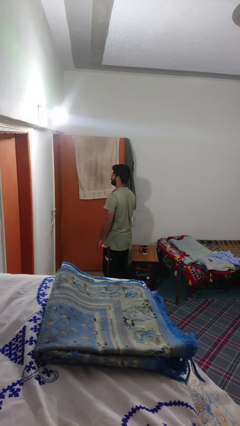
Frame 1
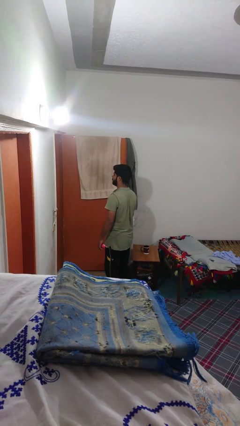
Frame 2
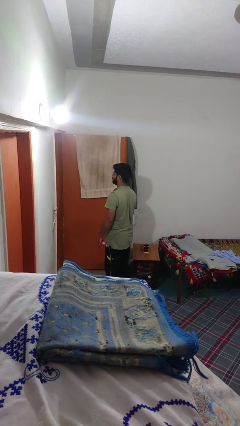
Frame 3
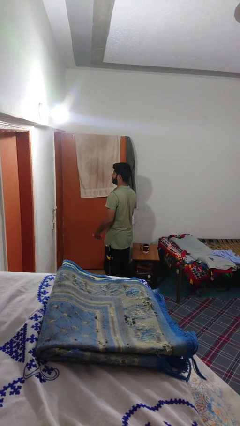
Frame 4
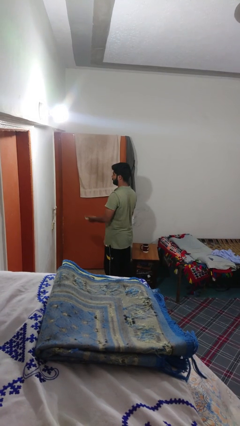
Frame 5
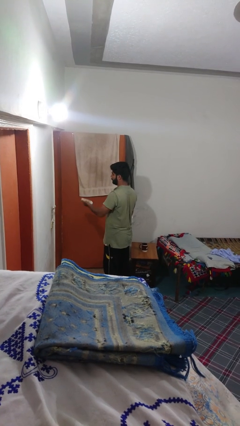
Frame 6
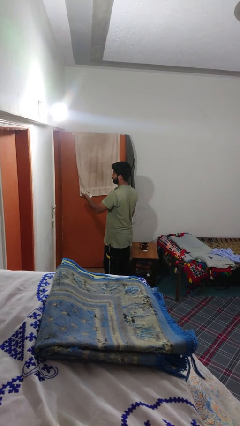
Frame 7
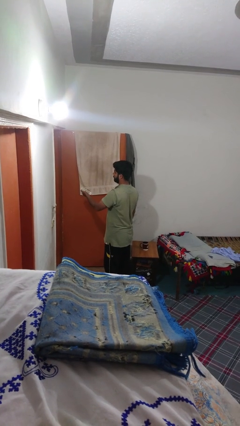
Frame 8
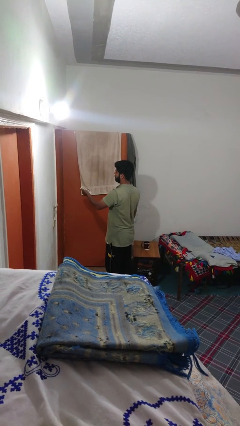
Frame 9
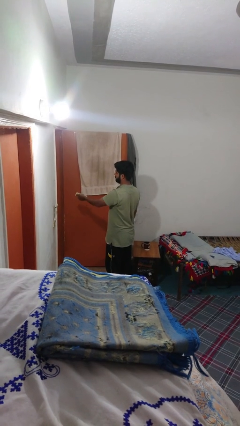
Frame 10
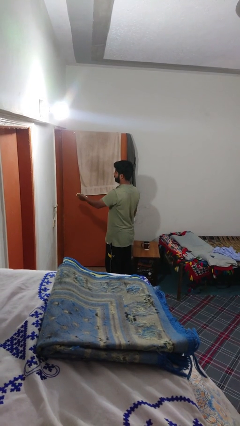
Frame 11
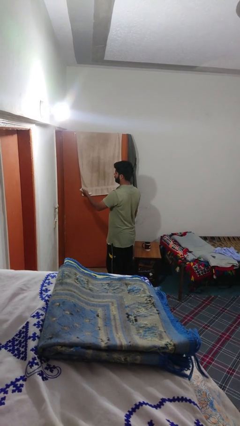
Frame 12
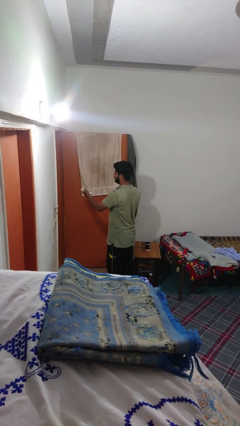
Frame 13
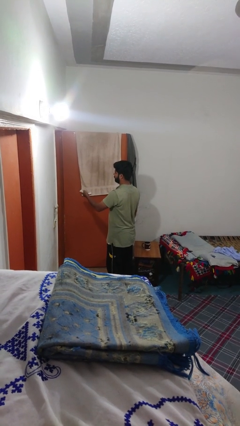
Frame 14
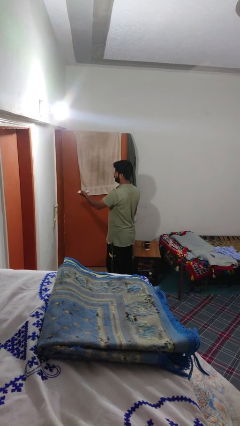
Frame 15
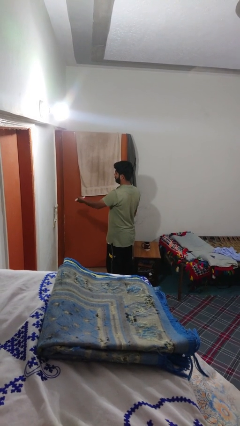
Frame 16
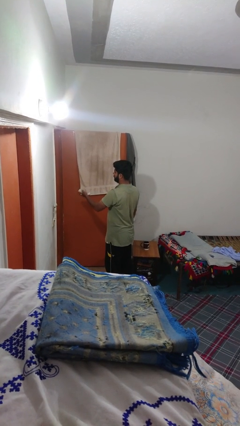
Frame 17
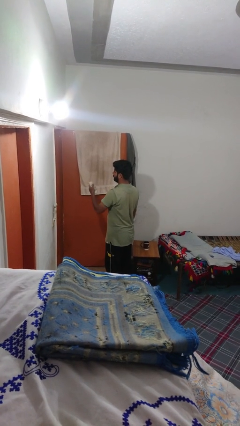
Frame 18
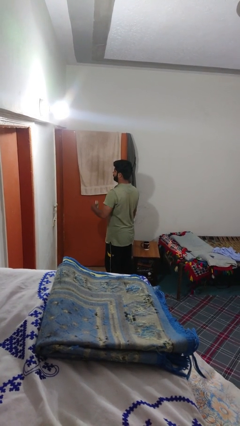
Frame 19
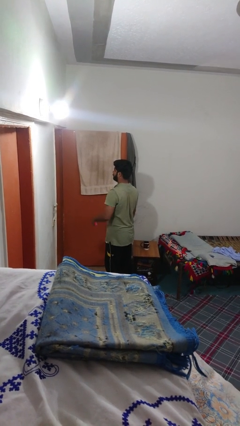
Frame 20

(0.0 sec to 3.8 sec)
person uses television remote

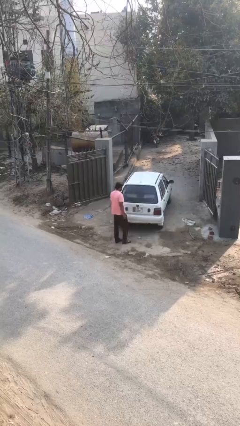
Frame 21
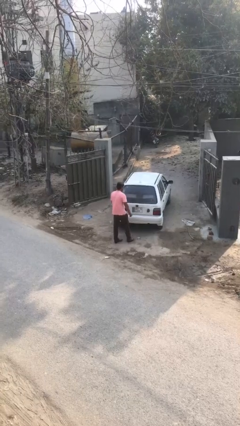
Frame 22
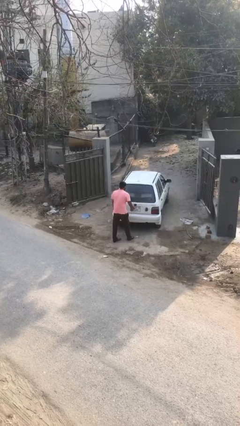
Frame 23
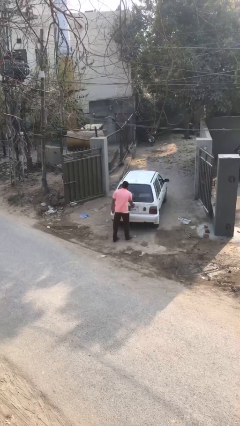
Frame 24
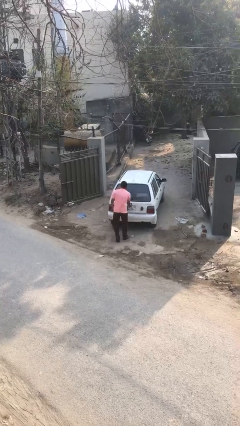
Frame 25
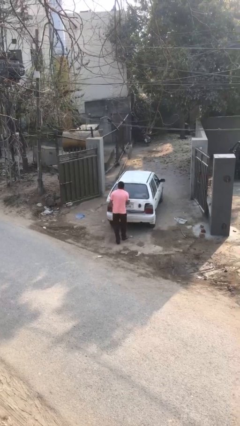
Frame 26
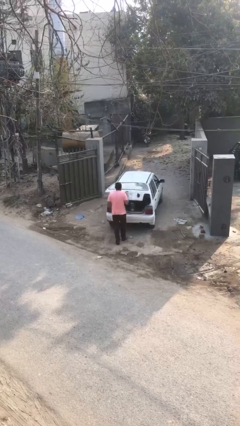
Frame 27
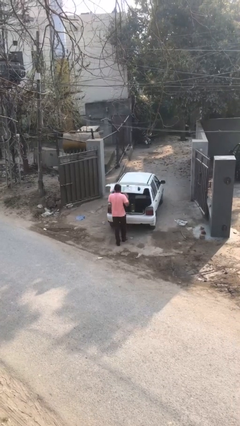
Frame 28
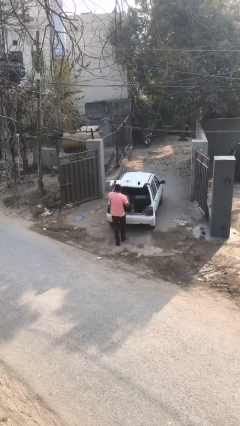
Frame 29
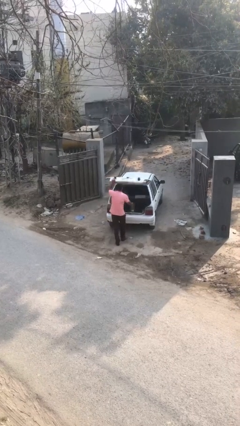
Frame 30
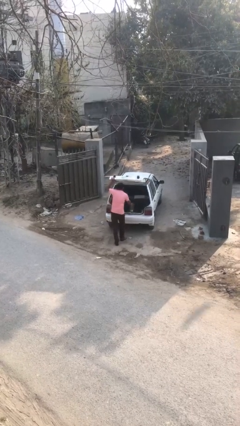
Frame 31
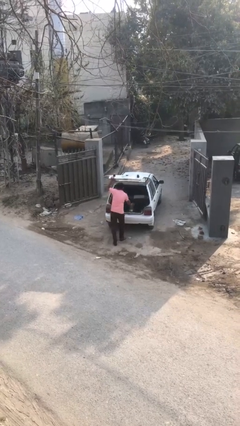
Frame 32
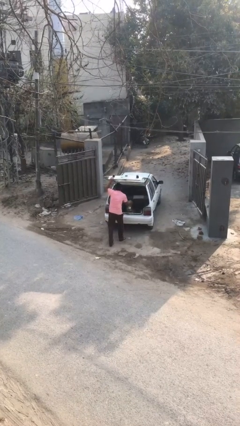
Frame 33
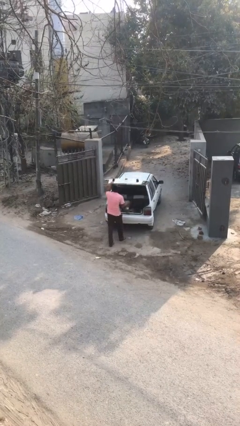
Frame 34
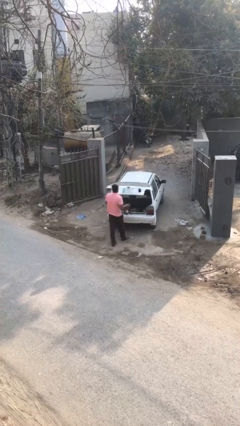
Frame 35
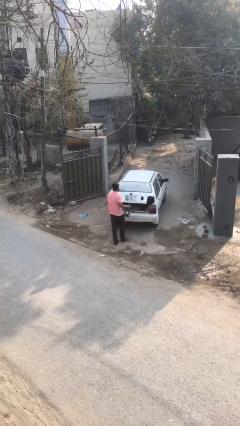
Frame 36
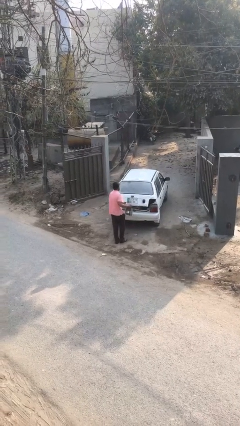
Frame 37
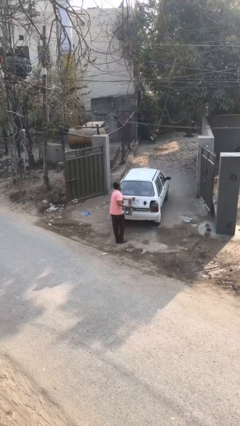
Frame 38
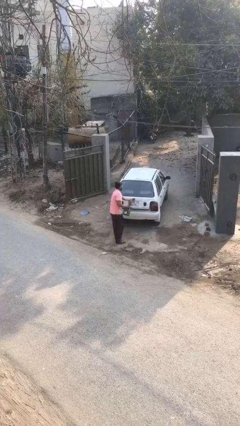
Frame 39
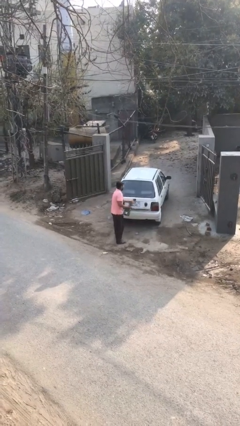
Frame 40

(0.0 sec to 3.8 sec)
person unloads car

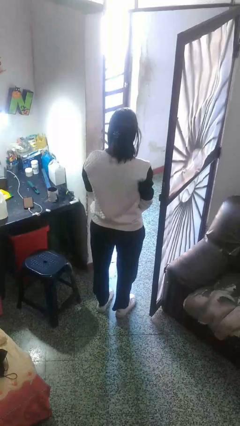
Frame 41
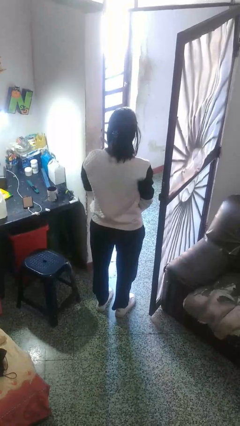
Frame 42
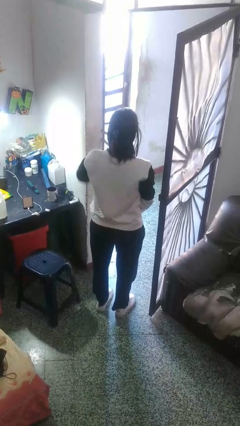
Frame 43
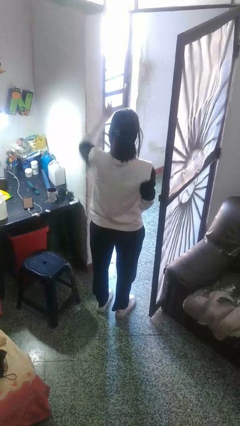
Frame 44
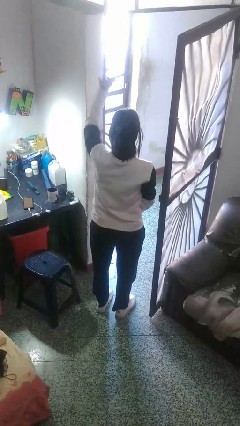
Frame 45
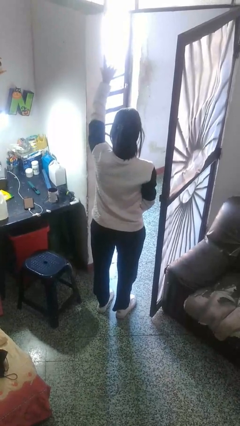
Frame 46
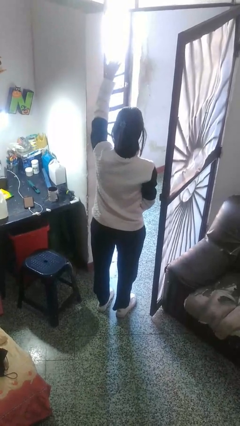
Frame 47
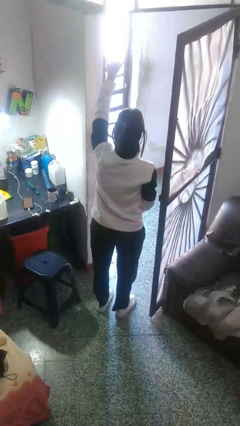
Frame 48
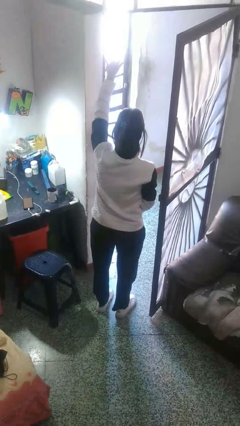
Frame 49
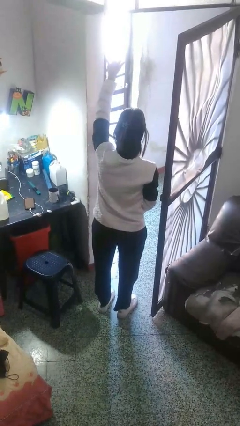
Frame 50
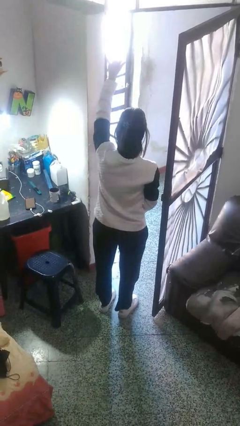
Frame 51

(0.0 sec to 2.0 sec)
person gestures raise hand

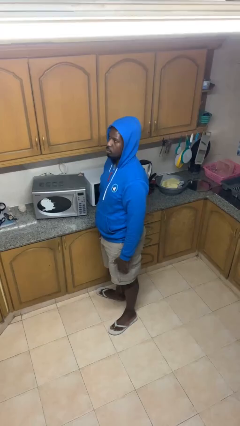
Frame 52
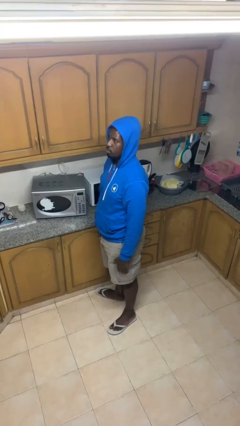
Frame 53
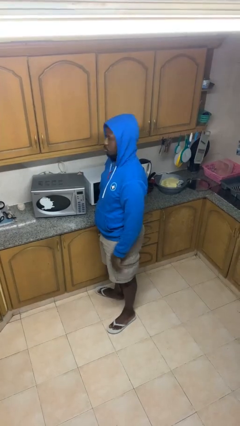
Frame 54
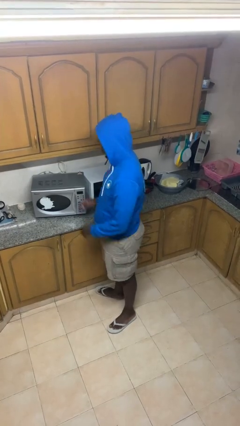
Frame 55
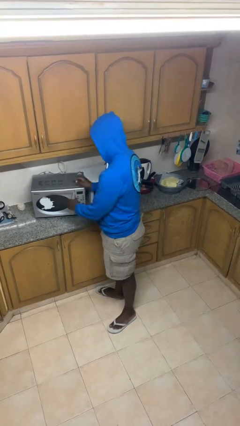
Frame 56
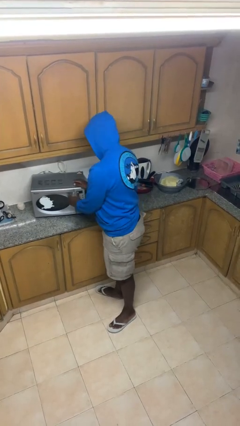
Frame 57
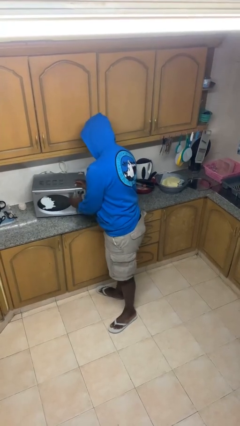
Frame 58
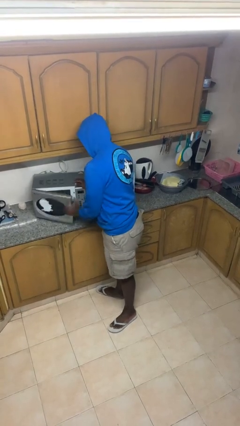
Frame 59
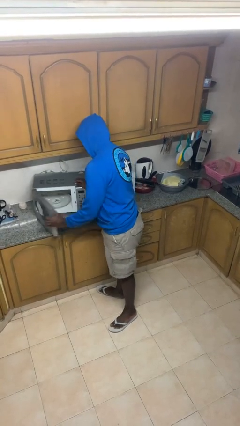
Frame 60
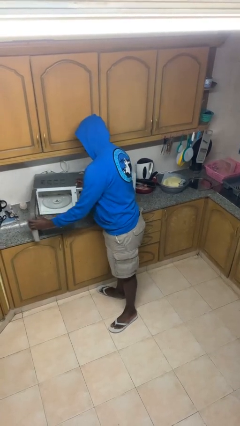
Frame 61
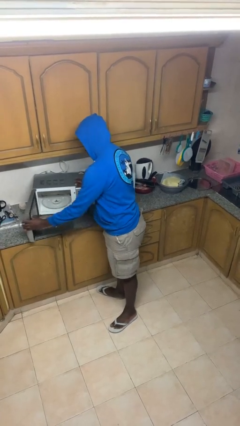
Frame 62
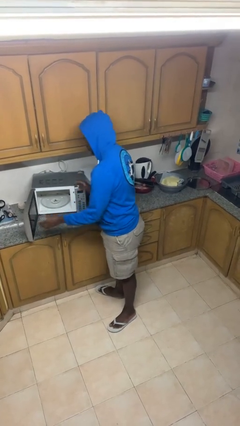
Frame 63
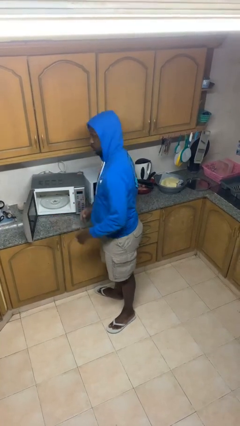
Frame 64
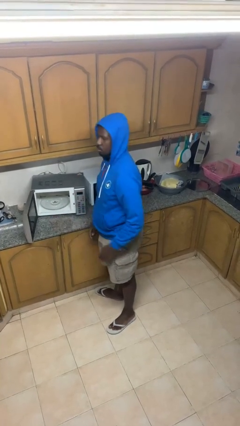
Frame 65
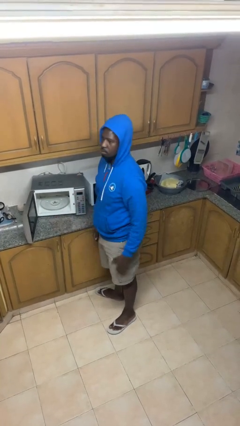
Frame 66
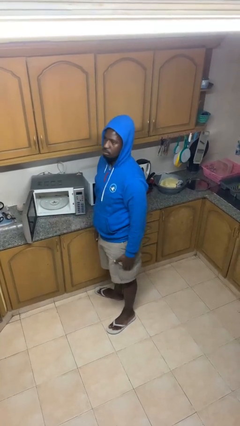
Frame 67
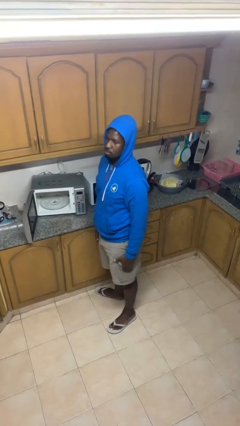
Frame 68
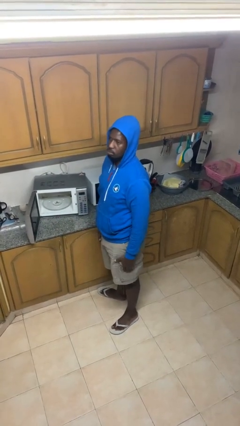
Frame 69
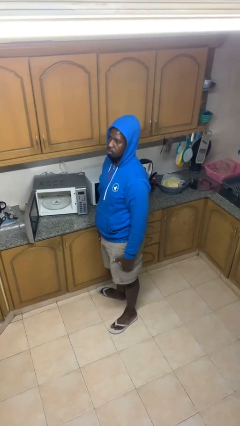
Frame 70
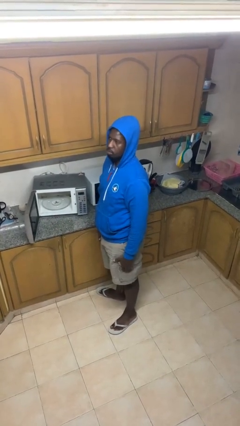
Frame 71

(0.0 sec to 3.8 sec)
person opens microwave

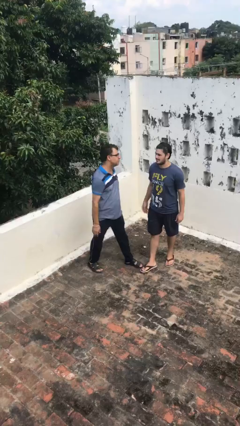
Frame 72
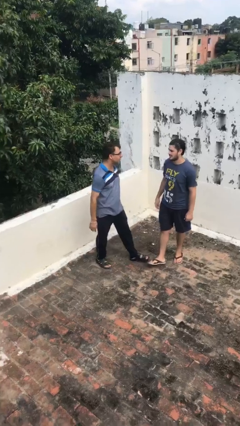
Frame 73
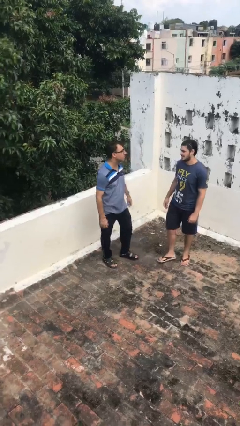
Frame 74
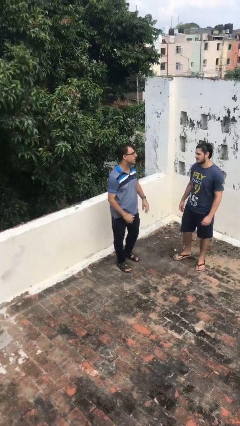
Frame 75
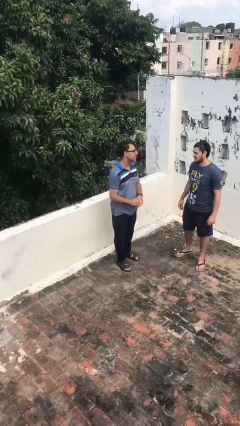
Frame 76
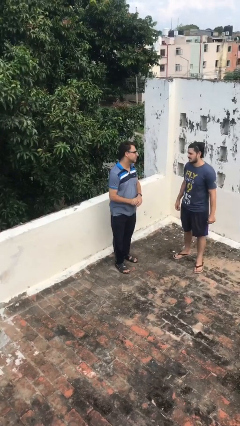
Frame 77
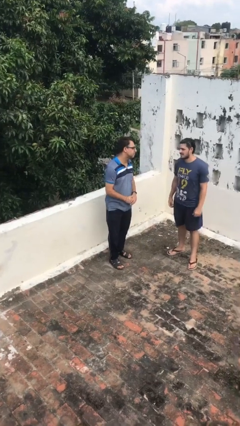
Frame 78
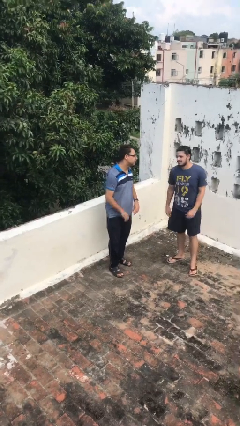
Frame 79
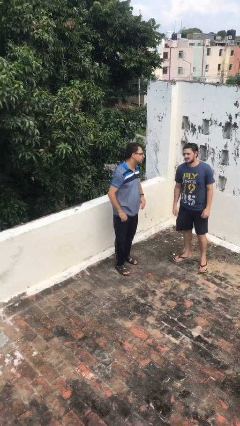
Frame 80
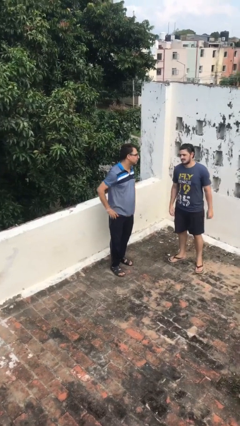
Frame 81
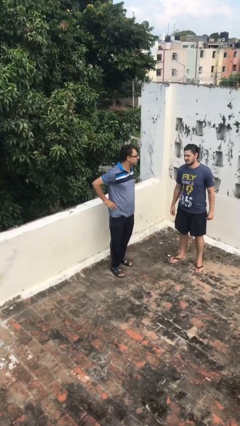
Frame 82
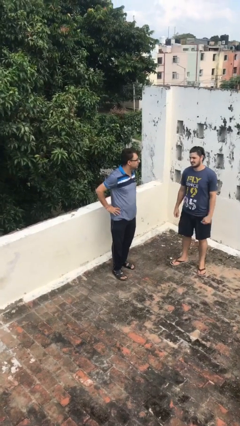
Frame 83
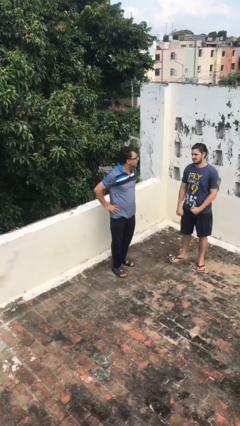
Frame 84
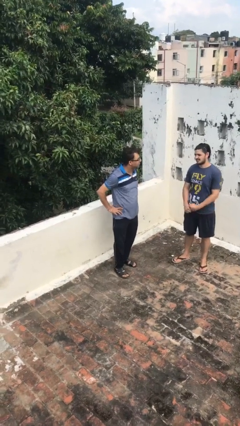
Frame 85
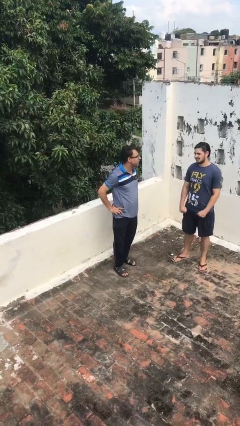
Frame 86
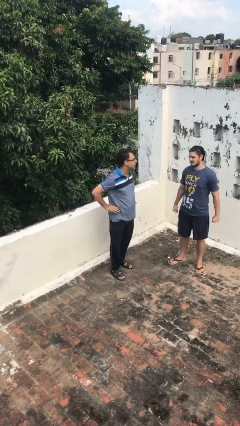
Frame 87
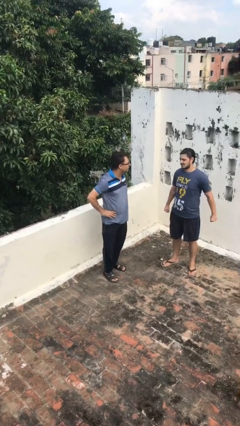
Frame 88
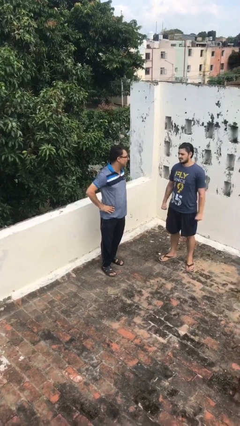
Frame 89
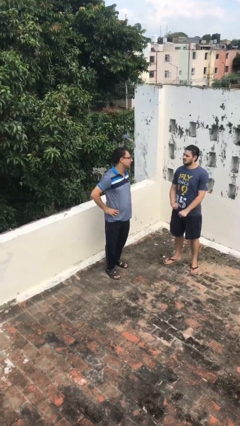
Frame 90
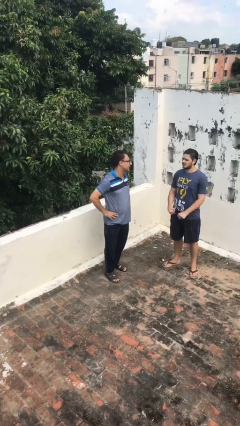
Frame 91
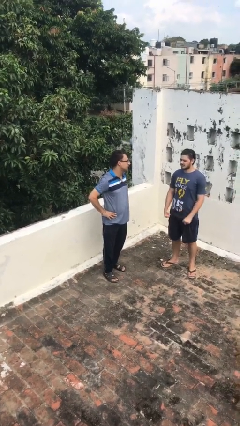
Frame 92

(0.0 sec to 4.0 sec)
person talks to person

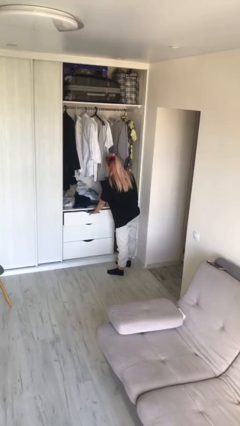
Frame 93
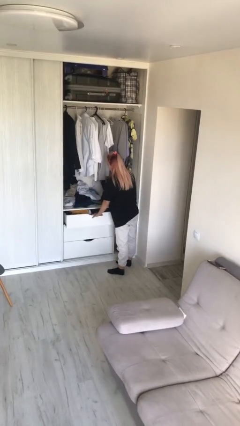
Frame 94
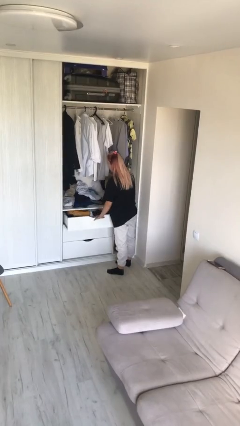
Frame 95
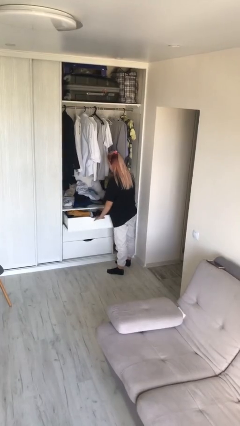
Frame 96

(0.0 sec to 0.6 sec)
person opens dresser drawer
